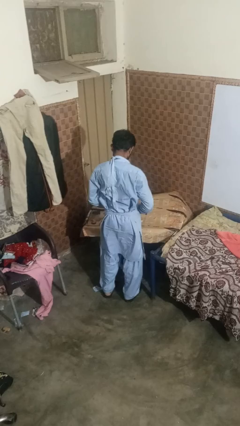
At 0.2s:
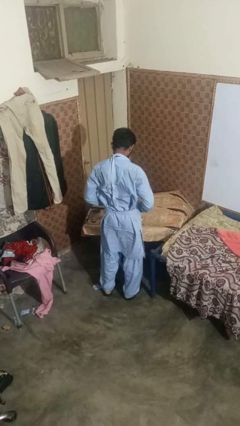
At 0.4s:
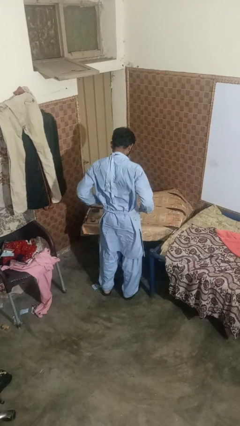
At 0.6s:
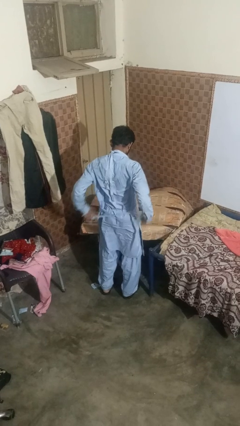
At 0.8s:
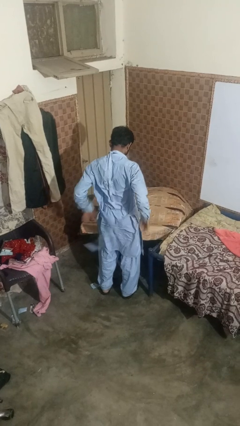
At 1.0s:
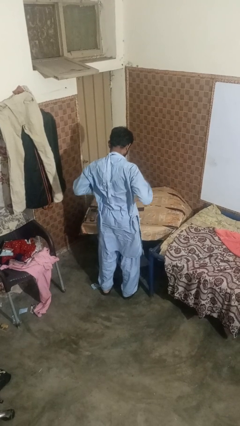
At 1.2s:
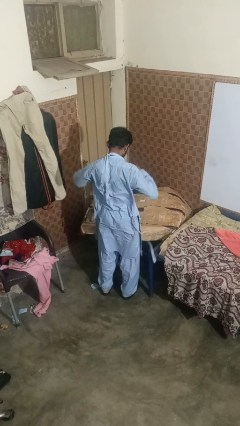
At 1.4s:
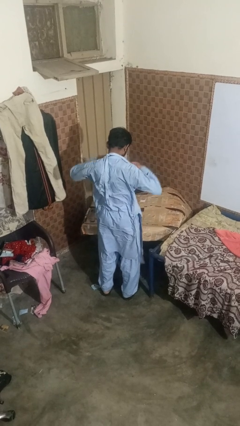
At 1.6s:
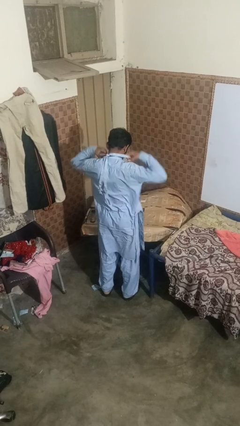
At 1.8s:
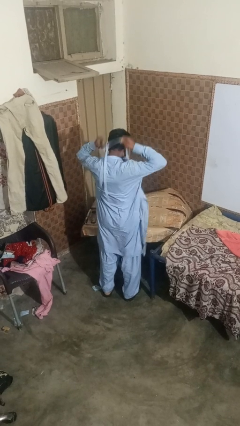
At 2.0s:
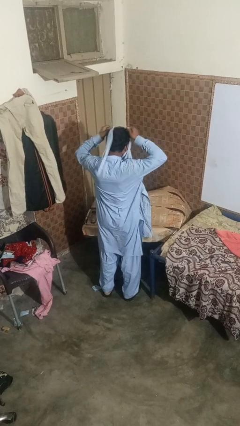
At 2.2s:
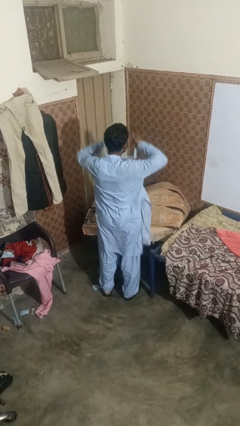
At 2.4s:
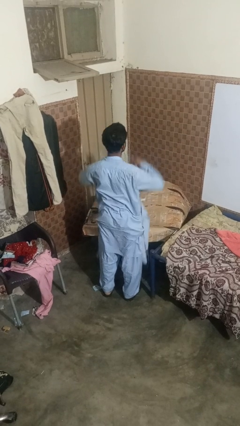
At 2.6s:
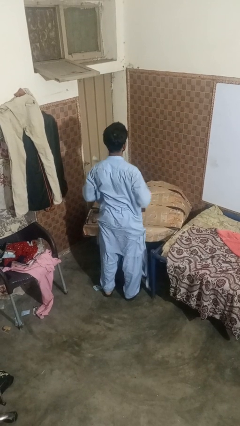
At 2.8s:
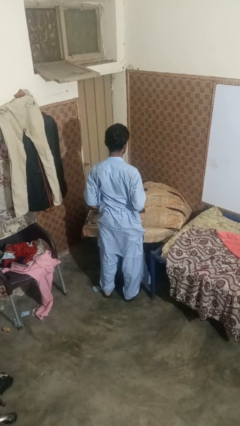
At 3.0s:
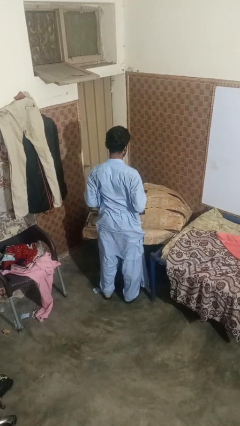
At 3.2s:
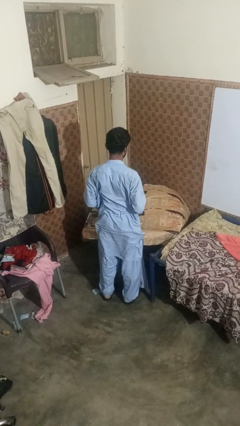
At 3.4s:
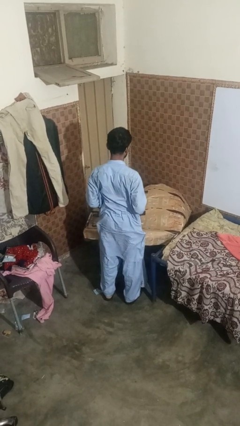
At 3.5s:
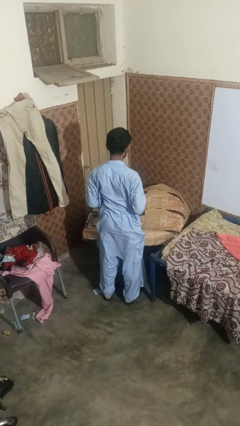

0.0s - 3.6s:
person takes off apron

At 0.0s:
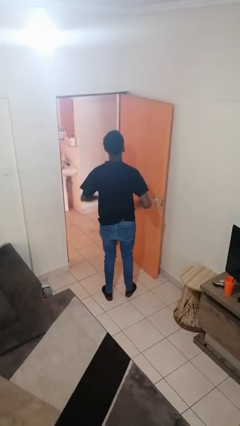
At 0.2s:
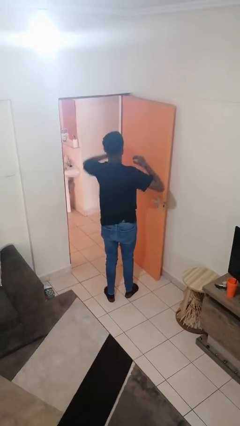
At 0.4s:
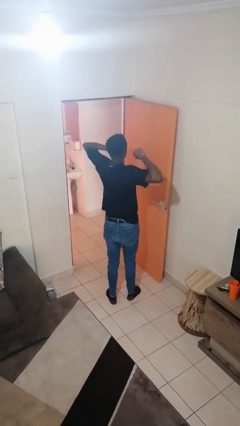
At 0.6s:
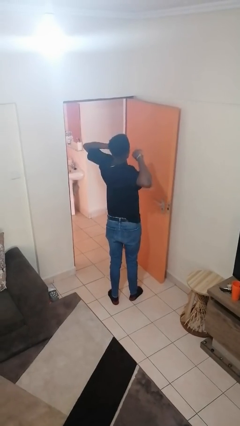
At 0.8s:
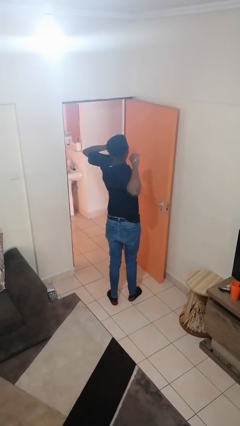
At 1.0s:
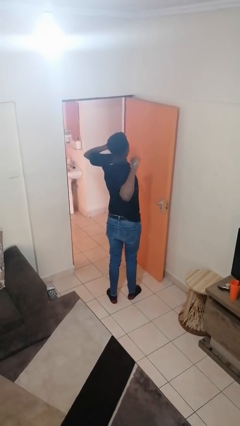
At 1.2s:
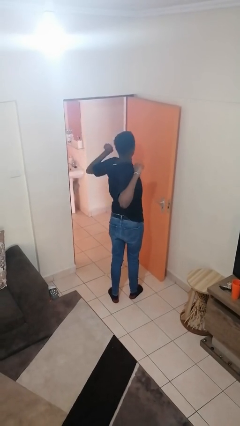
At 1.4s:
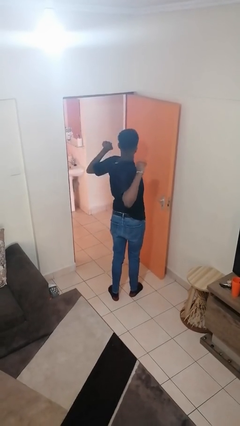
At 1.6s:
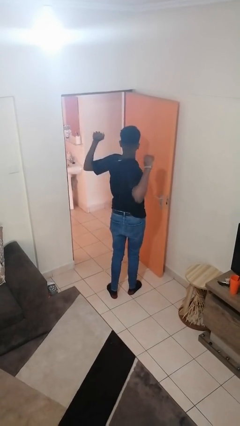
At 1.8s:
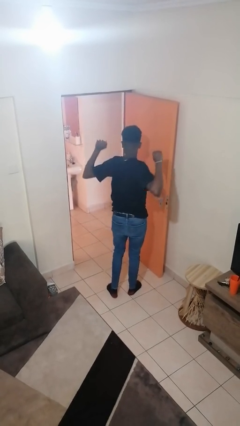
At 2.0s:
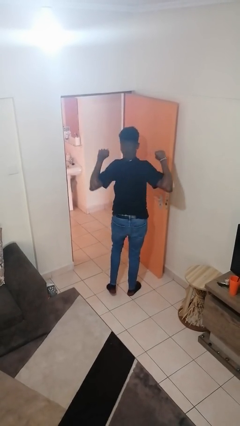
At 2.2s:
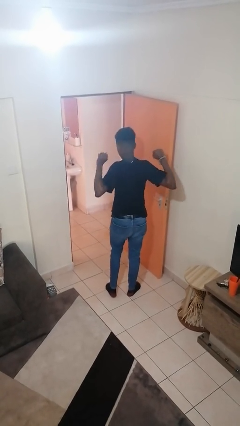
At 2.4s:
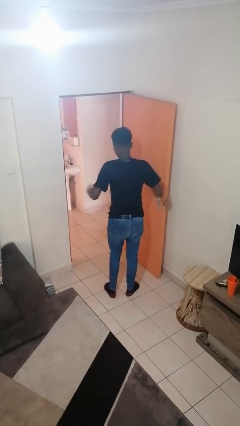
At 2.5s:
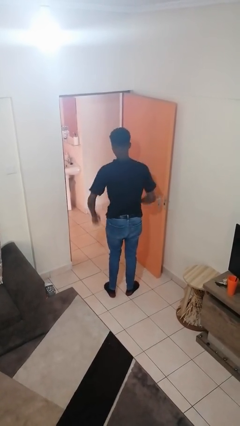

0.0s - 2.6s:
person stretches arms to side

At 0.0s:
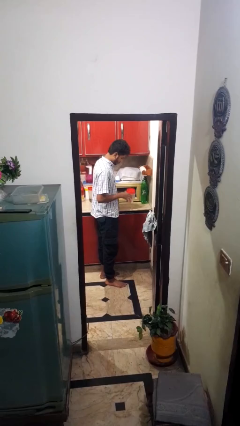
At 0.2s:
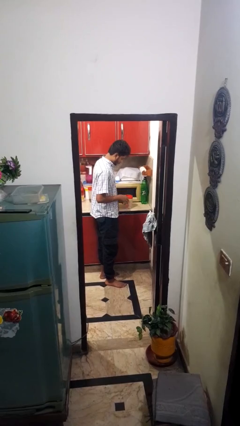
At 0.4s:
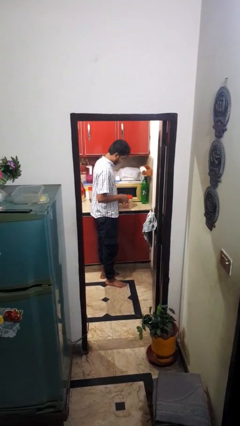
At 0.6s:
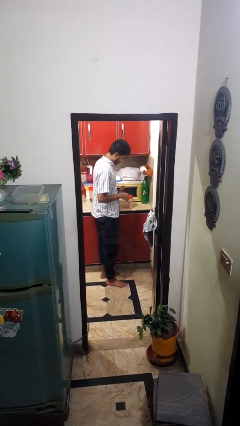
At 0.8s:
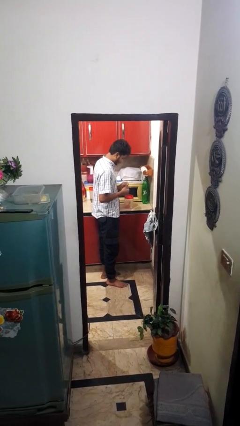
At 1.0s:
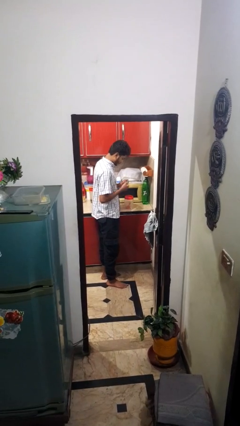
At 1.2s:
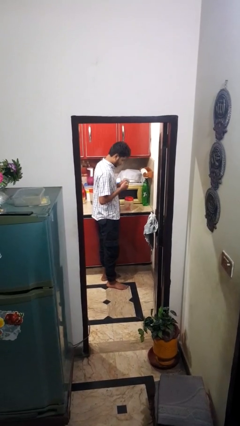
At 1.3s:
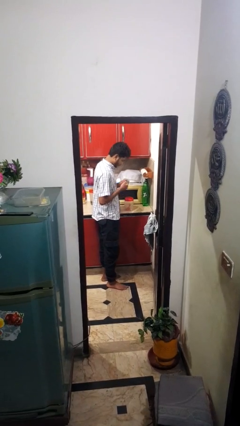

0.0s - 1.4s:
person puts down object on countertop

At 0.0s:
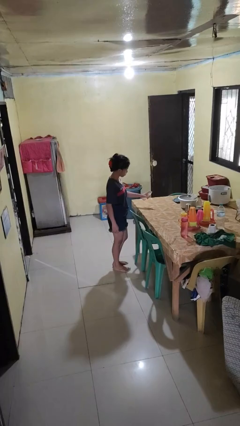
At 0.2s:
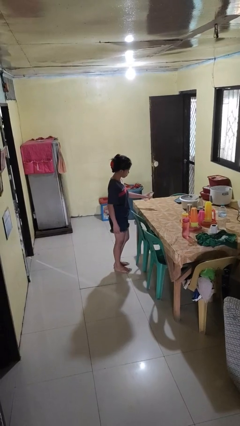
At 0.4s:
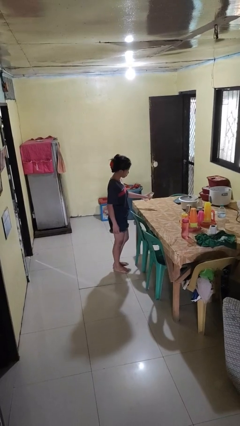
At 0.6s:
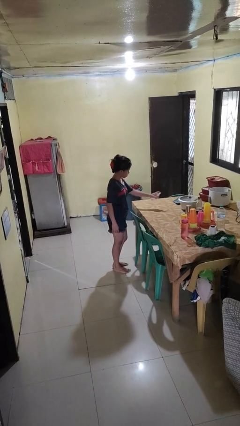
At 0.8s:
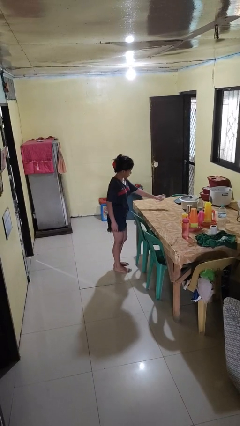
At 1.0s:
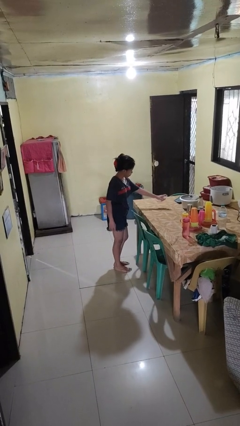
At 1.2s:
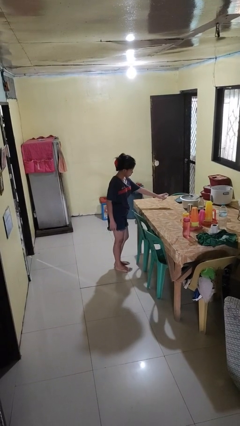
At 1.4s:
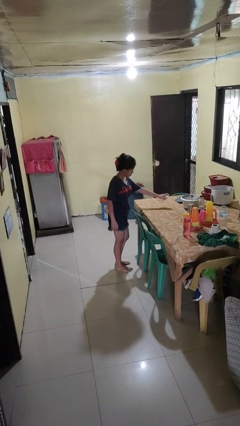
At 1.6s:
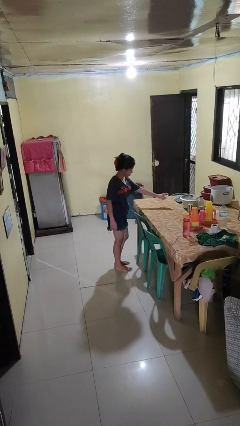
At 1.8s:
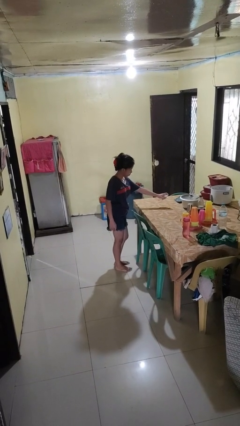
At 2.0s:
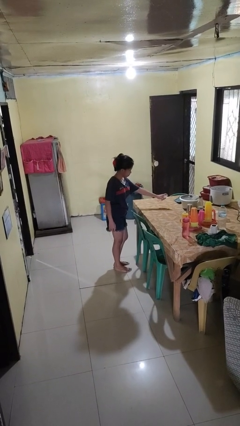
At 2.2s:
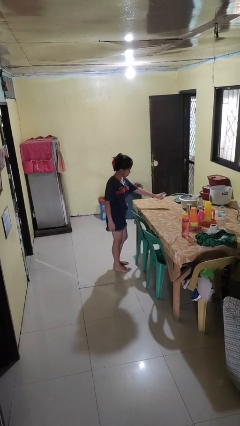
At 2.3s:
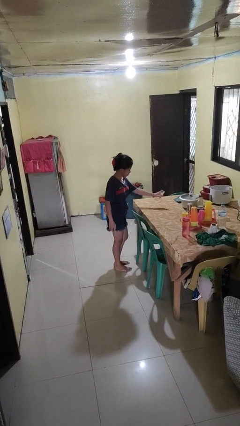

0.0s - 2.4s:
person sprays from bottle

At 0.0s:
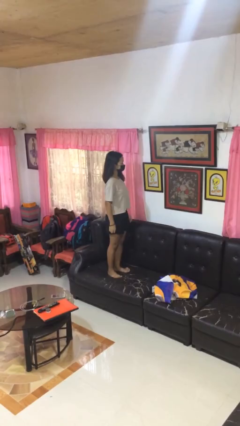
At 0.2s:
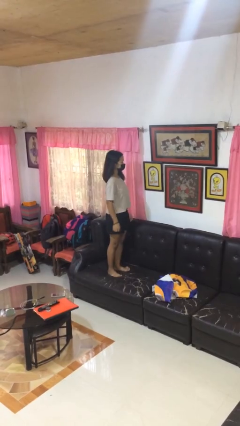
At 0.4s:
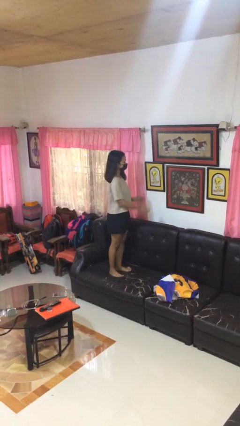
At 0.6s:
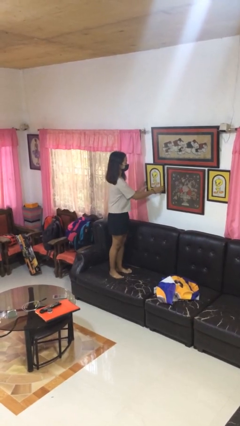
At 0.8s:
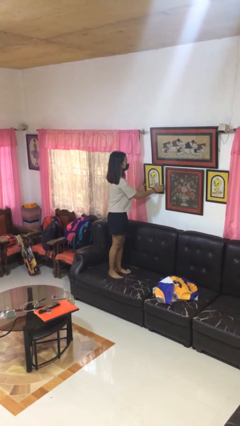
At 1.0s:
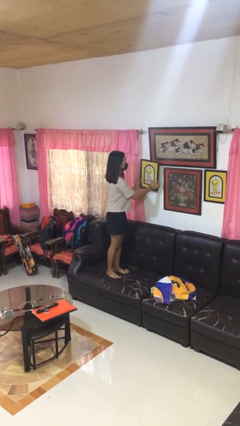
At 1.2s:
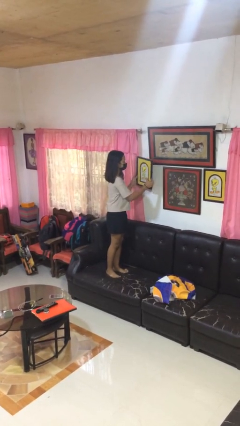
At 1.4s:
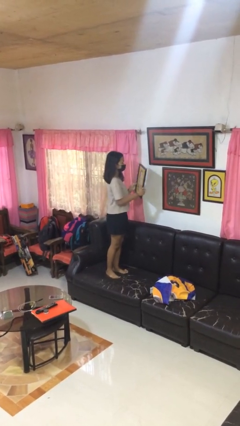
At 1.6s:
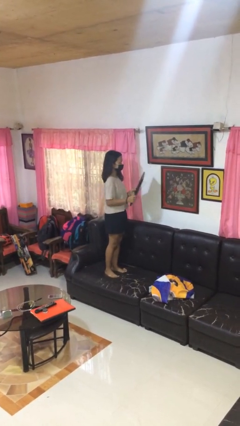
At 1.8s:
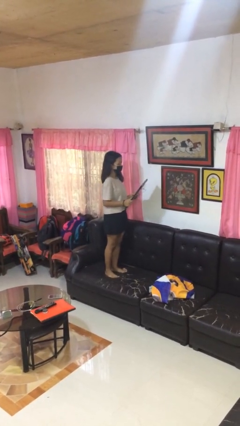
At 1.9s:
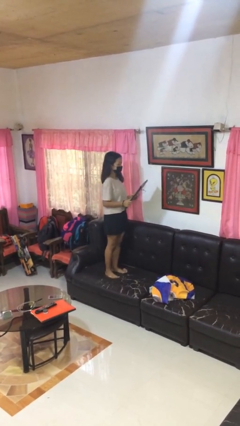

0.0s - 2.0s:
person takes down picture frame

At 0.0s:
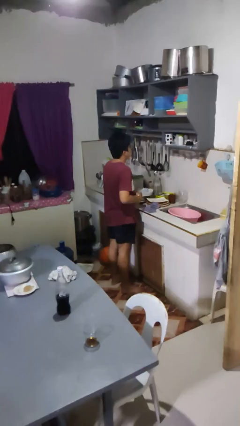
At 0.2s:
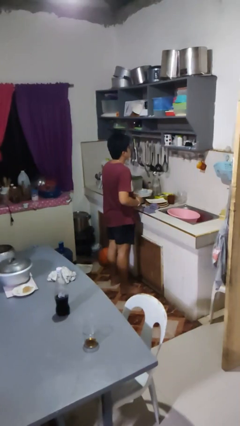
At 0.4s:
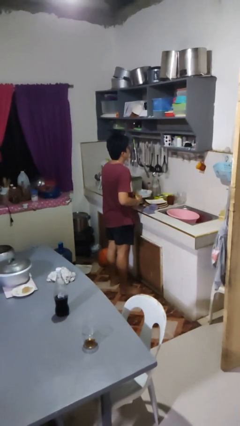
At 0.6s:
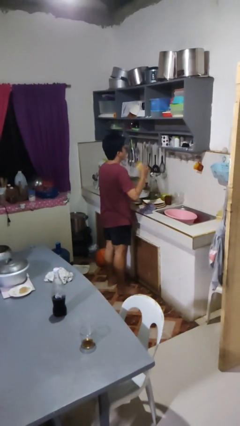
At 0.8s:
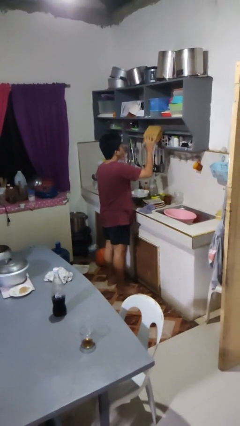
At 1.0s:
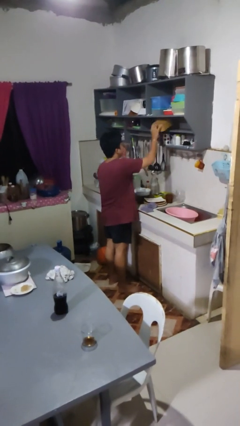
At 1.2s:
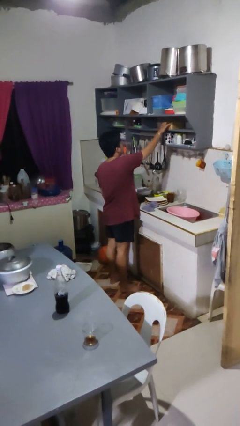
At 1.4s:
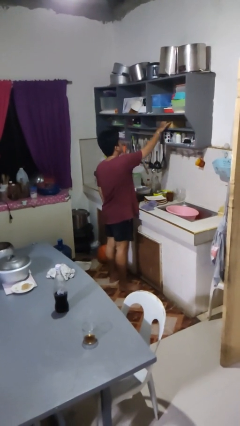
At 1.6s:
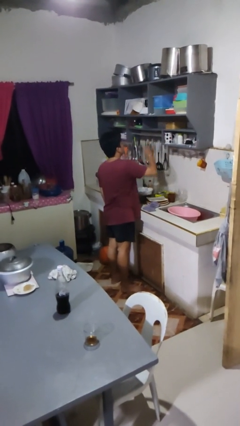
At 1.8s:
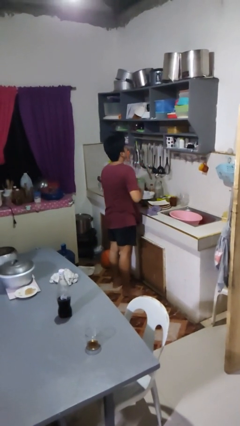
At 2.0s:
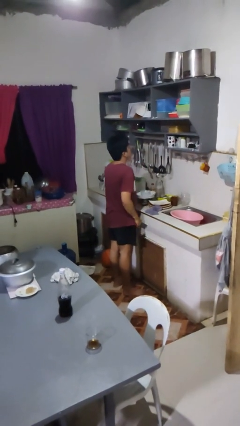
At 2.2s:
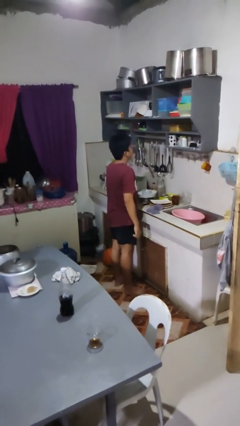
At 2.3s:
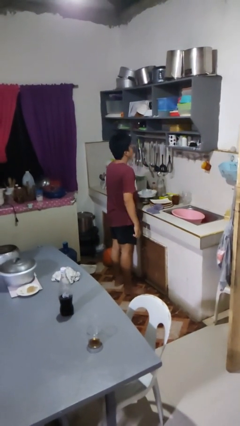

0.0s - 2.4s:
person puts object in cabinet

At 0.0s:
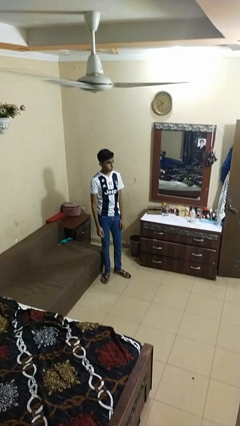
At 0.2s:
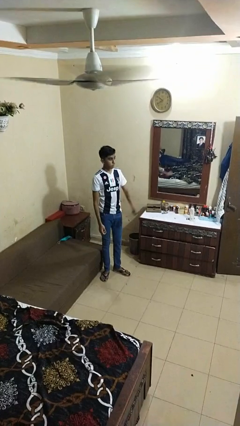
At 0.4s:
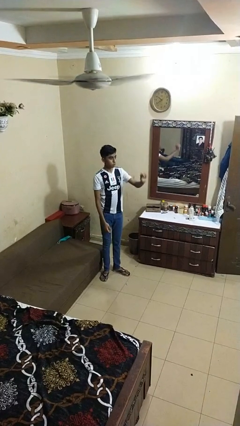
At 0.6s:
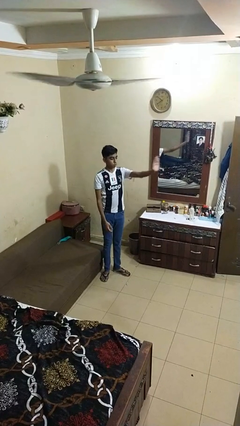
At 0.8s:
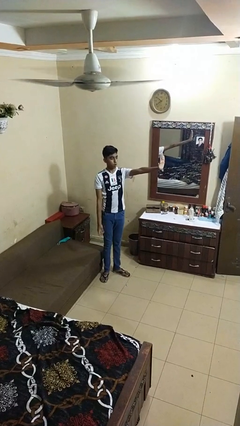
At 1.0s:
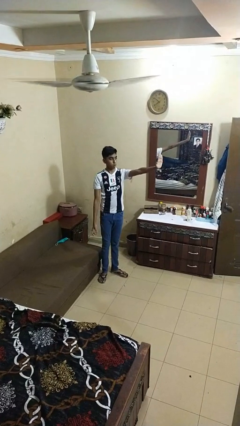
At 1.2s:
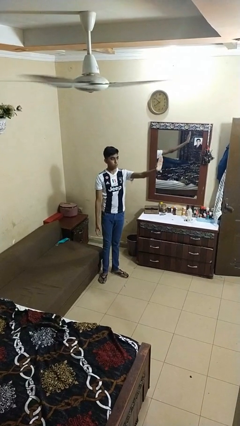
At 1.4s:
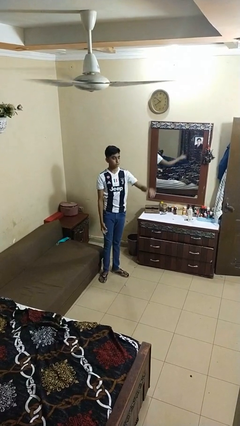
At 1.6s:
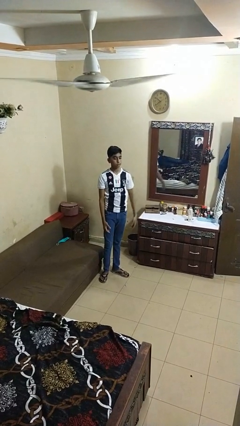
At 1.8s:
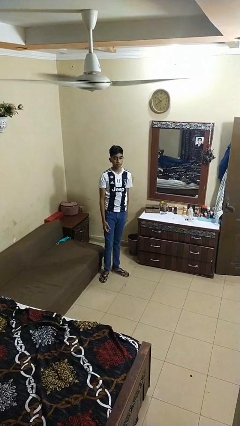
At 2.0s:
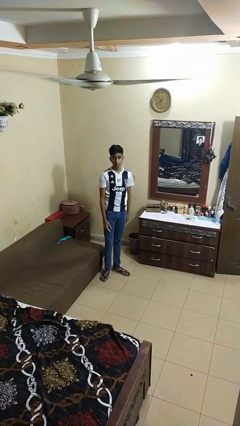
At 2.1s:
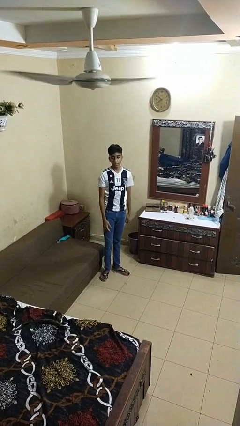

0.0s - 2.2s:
person gestures stop

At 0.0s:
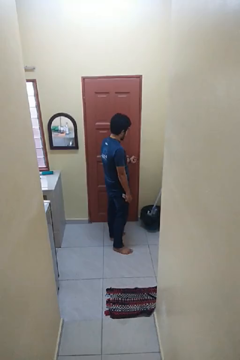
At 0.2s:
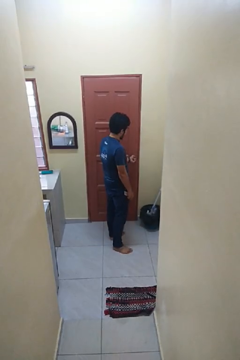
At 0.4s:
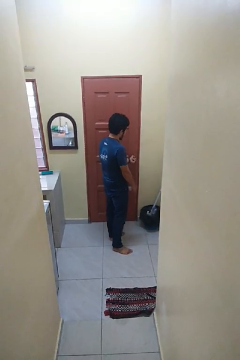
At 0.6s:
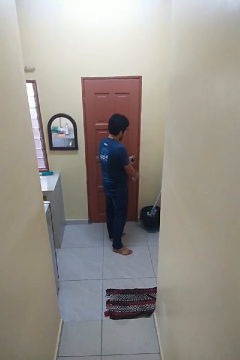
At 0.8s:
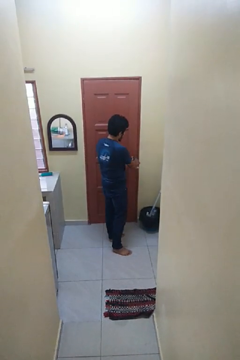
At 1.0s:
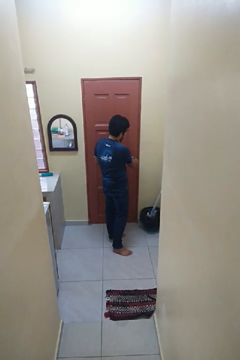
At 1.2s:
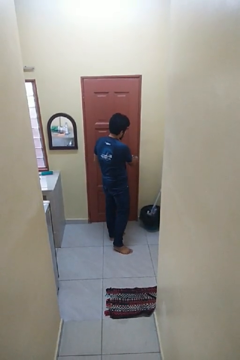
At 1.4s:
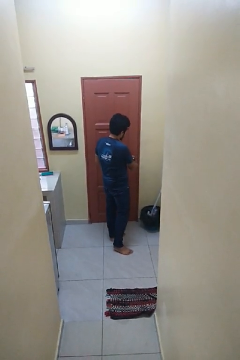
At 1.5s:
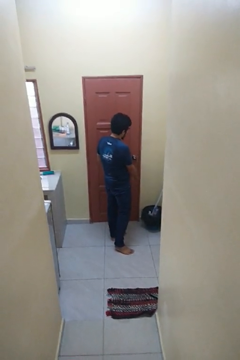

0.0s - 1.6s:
person locks door with keys
